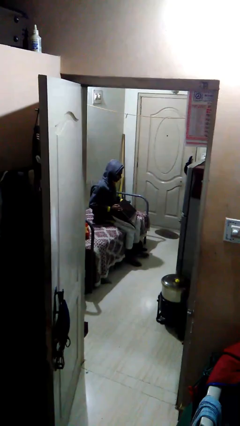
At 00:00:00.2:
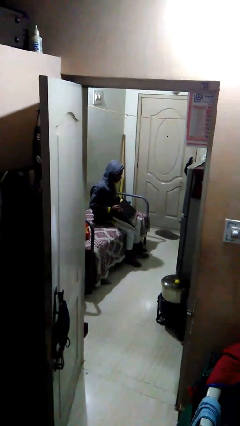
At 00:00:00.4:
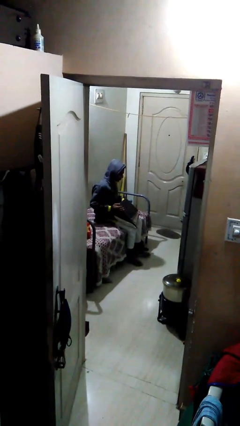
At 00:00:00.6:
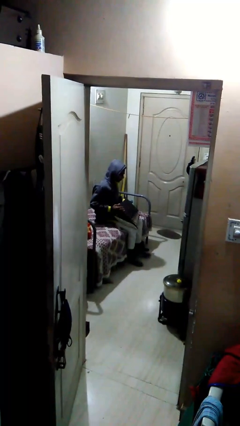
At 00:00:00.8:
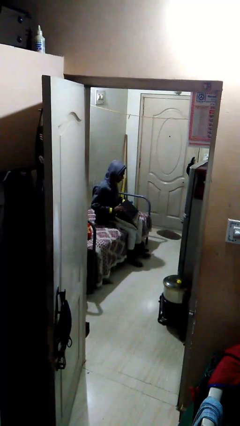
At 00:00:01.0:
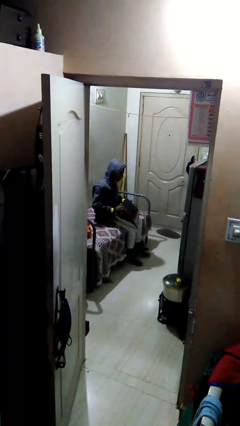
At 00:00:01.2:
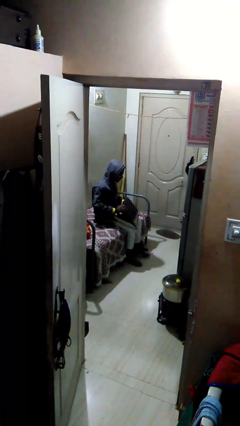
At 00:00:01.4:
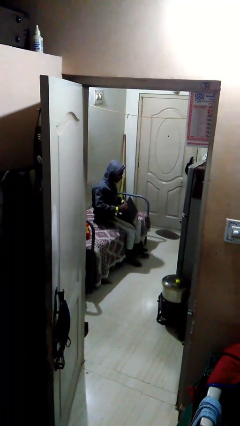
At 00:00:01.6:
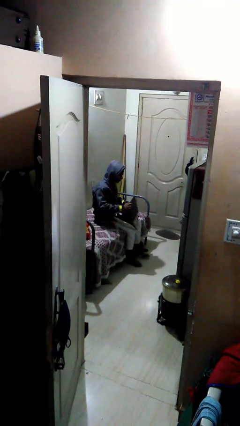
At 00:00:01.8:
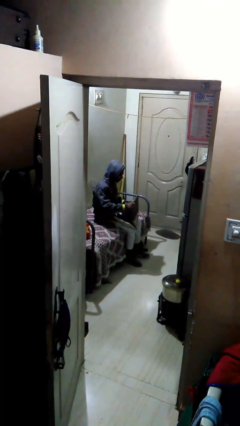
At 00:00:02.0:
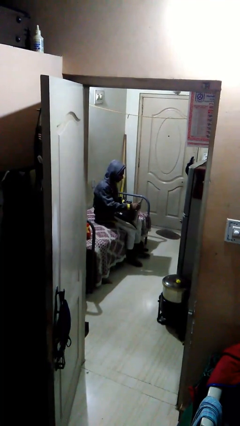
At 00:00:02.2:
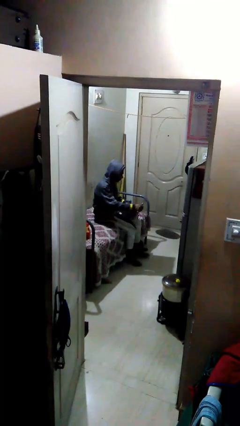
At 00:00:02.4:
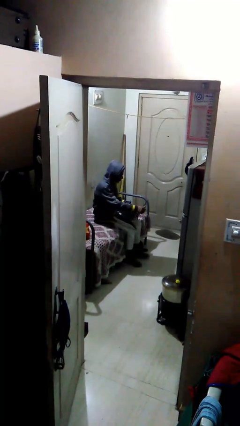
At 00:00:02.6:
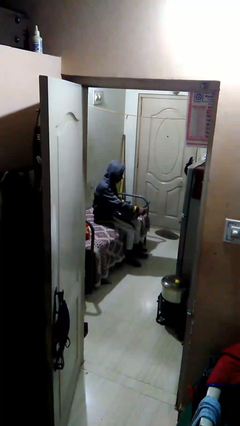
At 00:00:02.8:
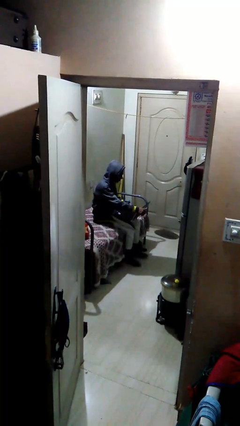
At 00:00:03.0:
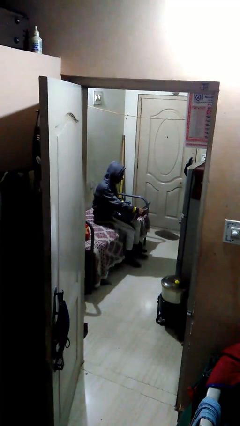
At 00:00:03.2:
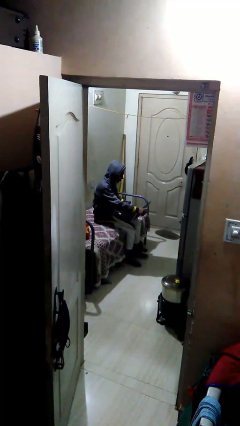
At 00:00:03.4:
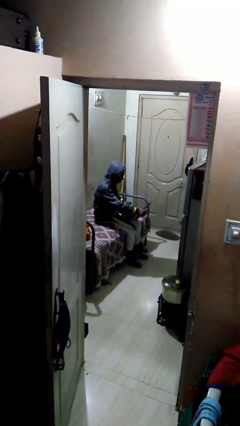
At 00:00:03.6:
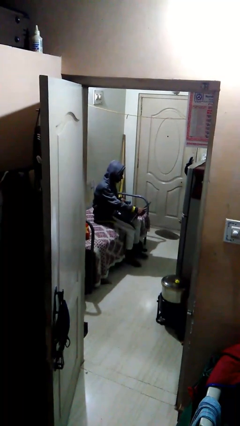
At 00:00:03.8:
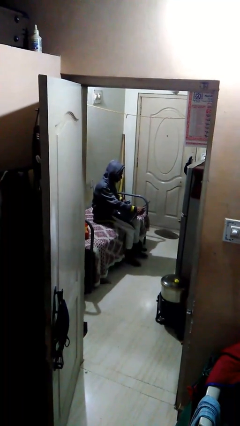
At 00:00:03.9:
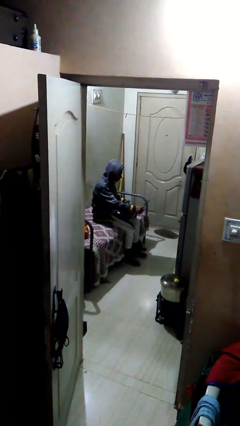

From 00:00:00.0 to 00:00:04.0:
person interacts with laptop

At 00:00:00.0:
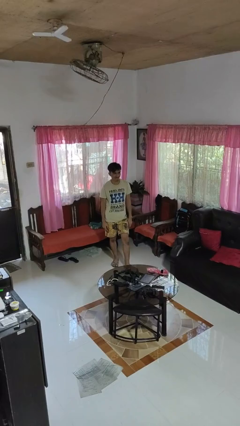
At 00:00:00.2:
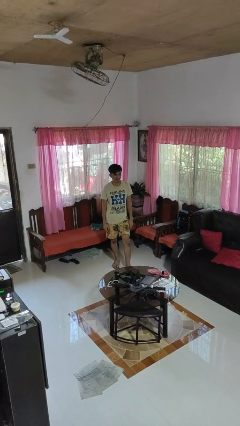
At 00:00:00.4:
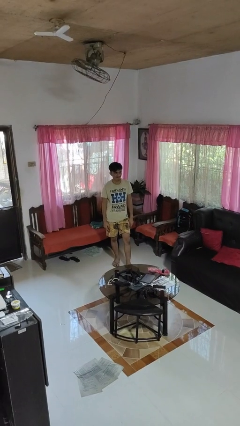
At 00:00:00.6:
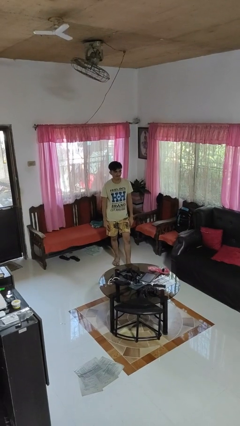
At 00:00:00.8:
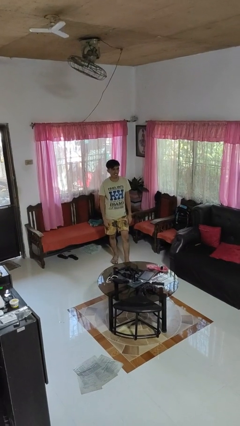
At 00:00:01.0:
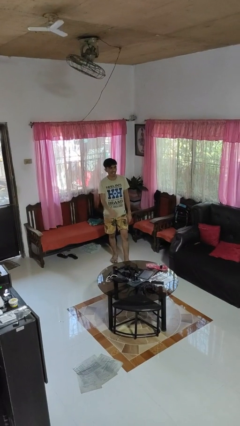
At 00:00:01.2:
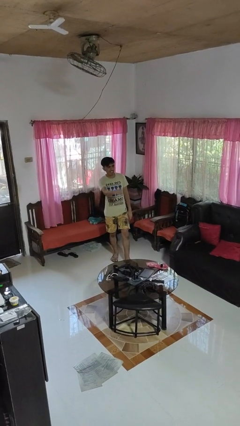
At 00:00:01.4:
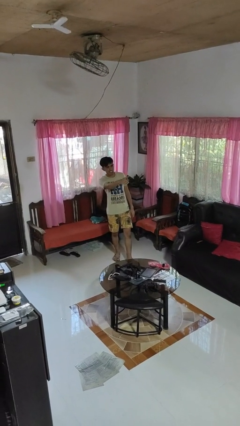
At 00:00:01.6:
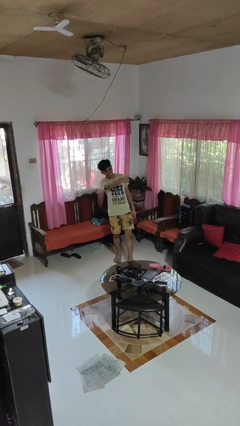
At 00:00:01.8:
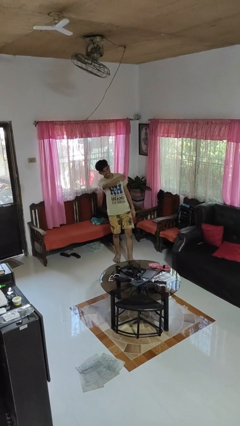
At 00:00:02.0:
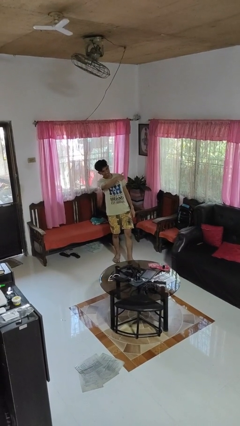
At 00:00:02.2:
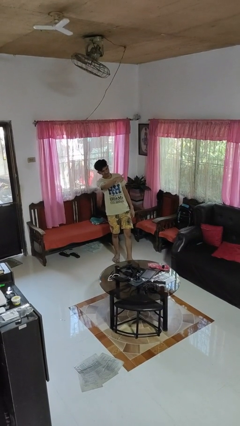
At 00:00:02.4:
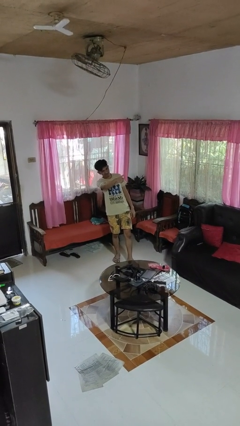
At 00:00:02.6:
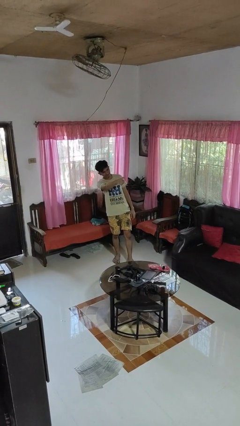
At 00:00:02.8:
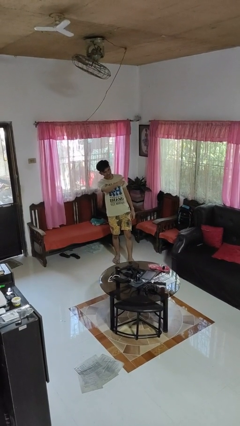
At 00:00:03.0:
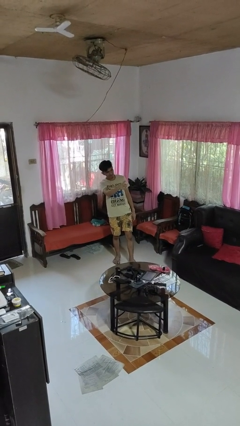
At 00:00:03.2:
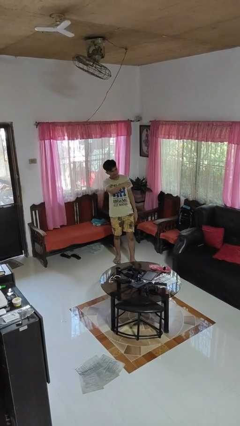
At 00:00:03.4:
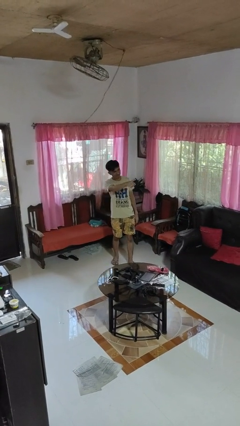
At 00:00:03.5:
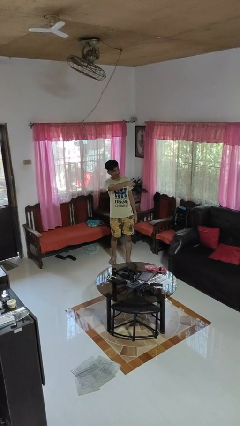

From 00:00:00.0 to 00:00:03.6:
person points at person

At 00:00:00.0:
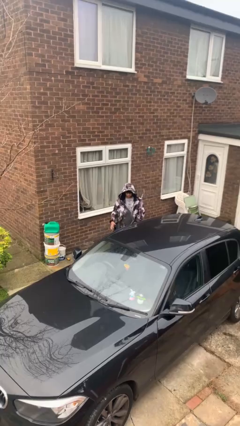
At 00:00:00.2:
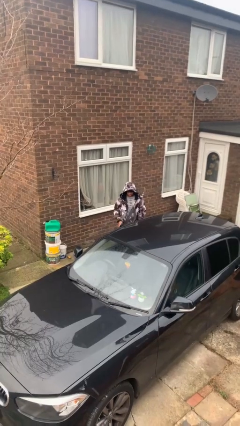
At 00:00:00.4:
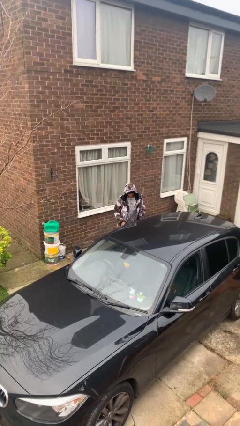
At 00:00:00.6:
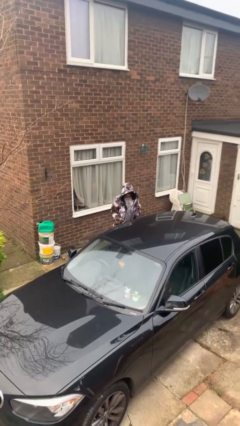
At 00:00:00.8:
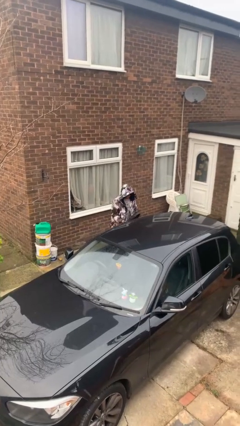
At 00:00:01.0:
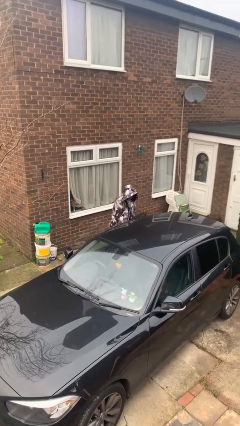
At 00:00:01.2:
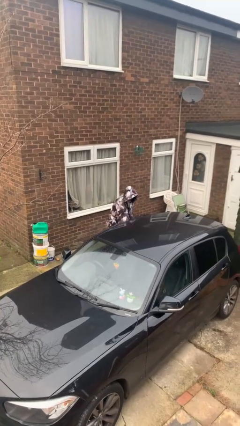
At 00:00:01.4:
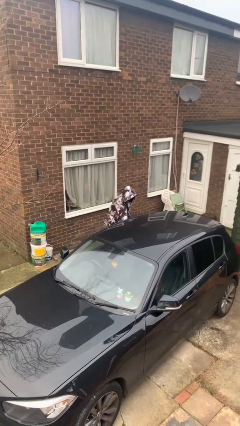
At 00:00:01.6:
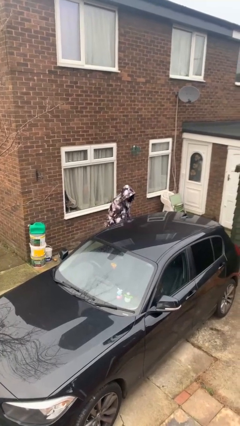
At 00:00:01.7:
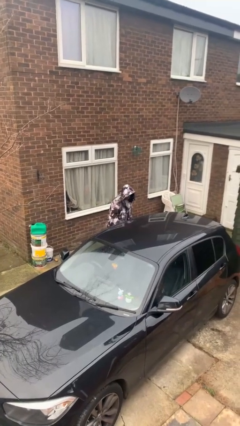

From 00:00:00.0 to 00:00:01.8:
person closes car door

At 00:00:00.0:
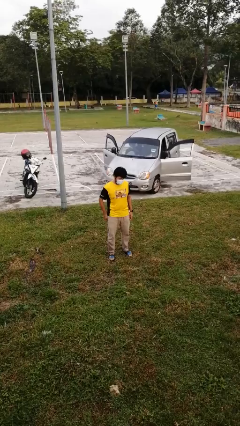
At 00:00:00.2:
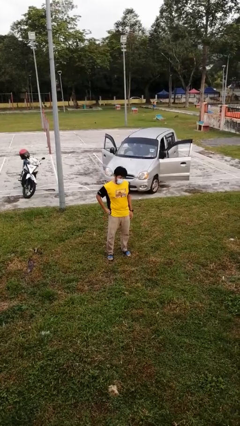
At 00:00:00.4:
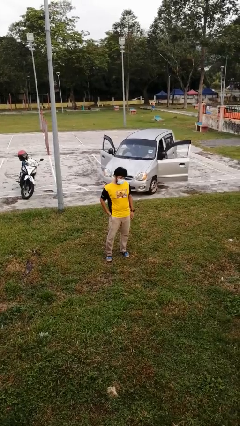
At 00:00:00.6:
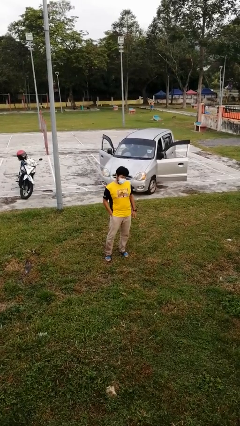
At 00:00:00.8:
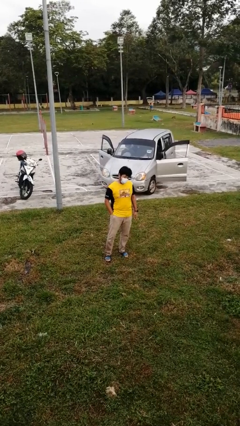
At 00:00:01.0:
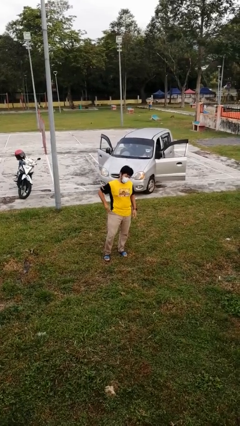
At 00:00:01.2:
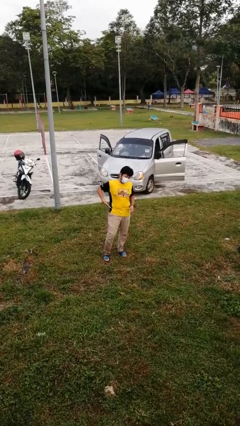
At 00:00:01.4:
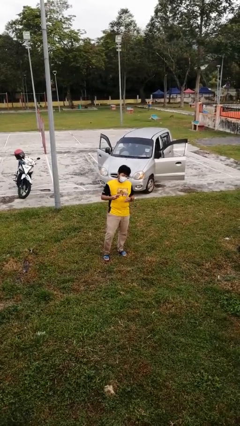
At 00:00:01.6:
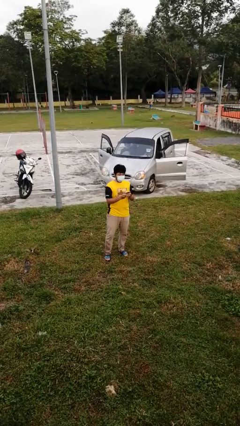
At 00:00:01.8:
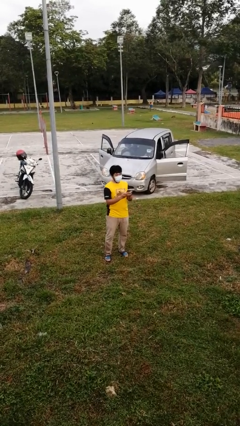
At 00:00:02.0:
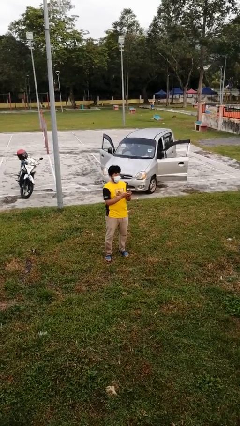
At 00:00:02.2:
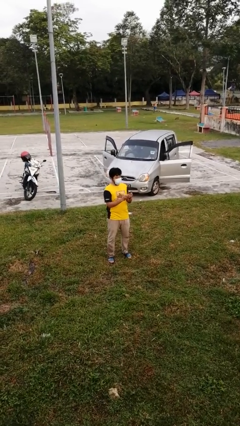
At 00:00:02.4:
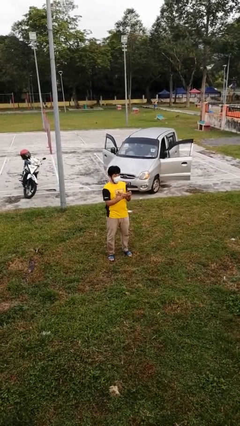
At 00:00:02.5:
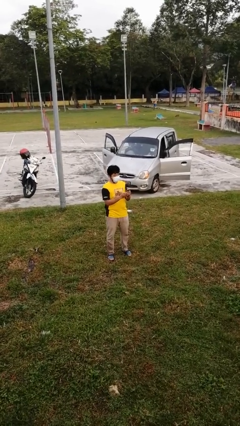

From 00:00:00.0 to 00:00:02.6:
person takes phone from pocket

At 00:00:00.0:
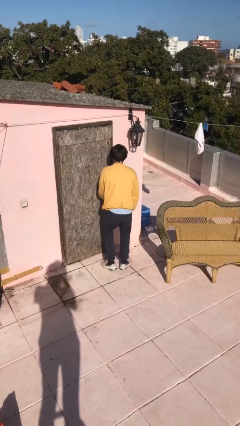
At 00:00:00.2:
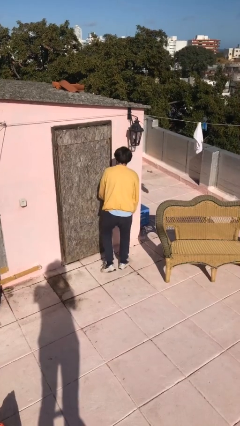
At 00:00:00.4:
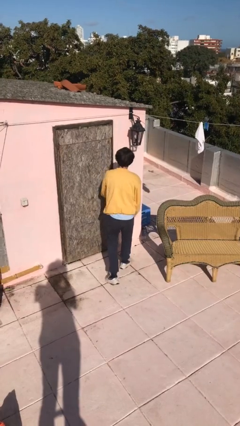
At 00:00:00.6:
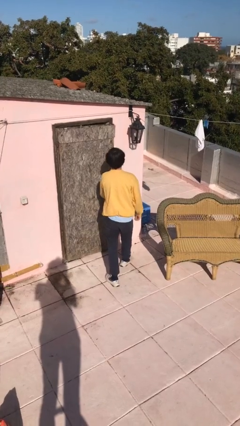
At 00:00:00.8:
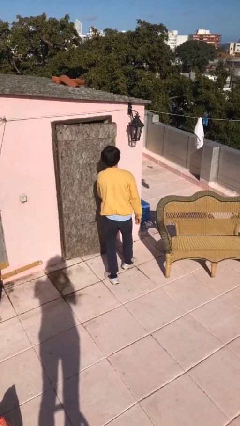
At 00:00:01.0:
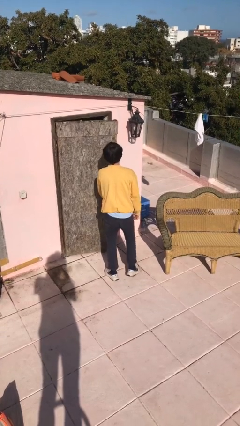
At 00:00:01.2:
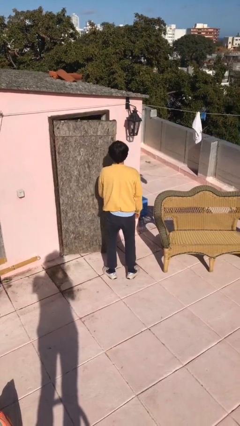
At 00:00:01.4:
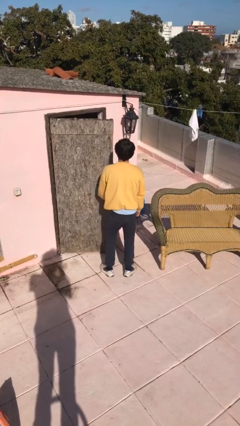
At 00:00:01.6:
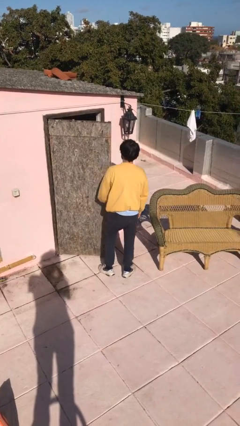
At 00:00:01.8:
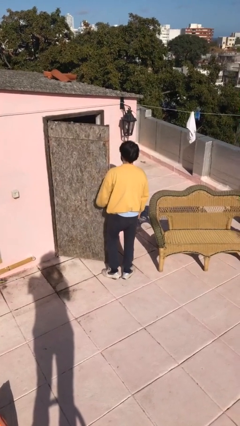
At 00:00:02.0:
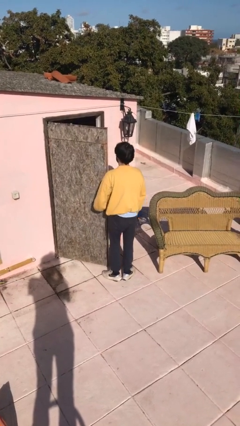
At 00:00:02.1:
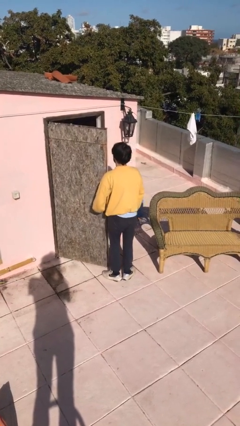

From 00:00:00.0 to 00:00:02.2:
person opens facility door

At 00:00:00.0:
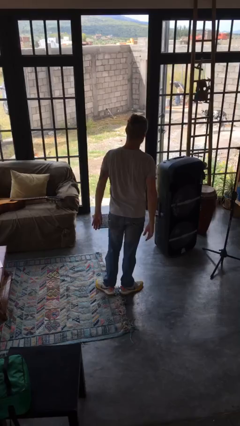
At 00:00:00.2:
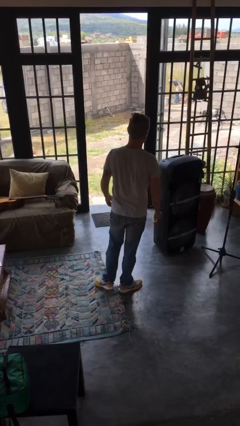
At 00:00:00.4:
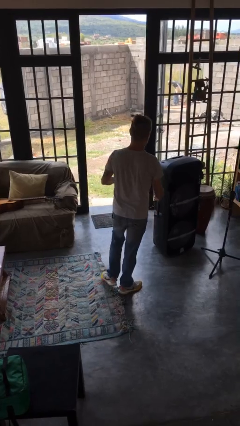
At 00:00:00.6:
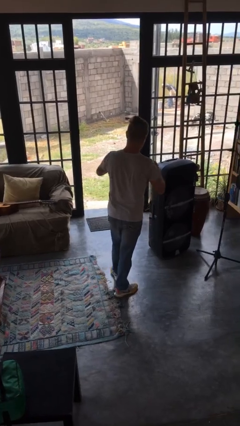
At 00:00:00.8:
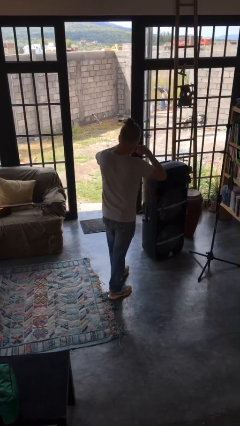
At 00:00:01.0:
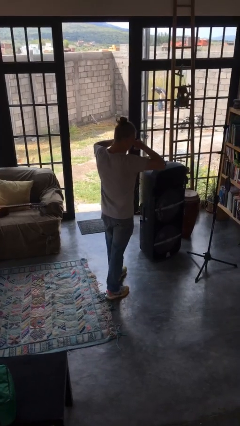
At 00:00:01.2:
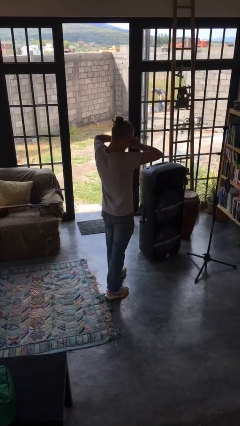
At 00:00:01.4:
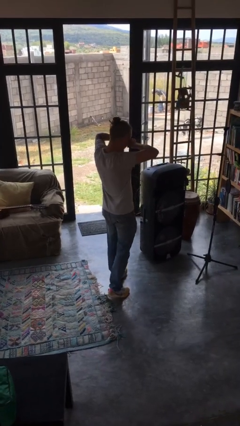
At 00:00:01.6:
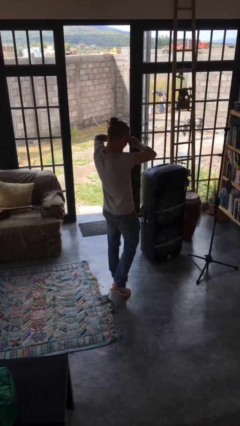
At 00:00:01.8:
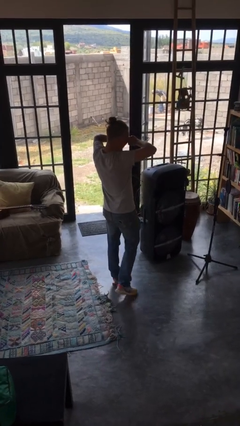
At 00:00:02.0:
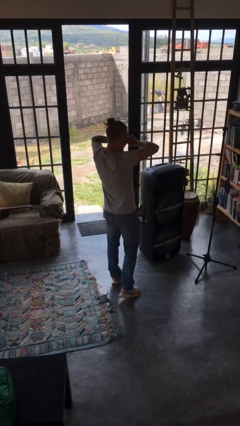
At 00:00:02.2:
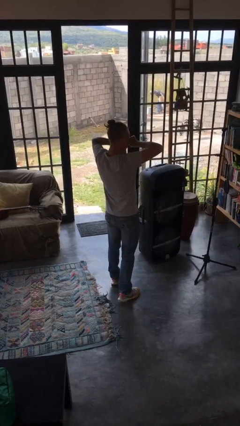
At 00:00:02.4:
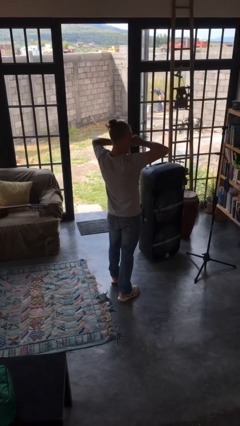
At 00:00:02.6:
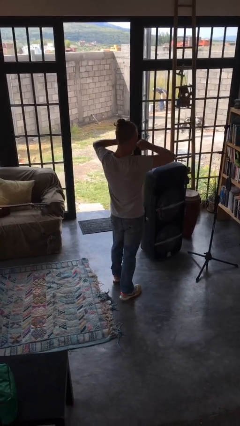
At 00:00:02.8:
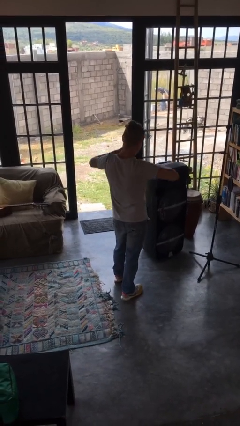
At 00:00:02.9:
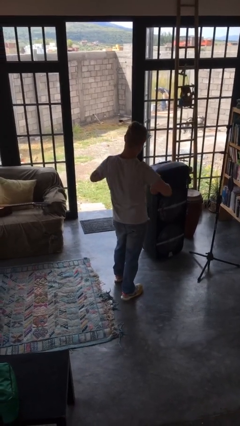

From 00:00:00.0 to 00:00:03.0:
person rubs eyes
